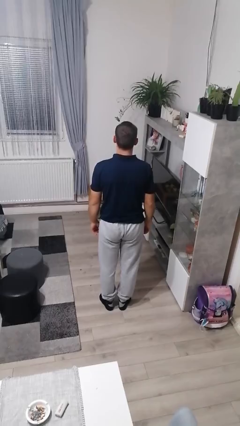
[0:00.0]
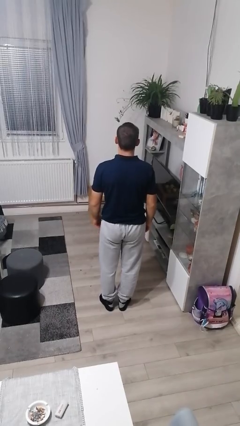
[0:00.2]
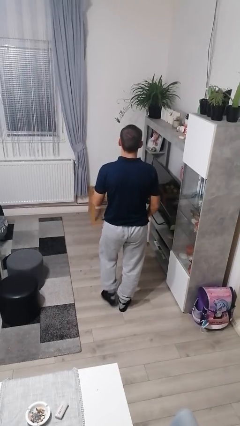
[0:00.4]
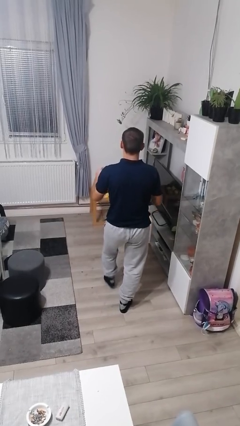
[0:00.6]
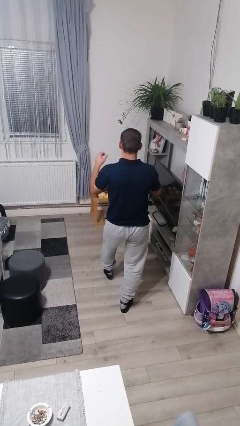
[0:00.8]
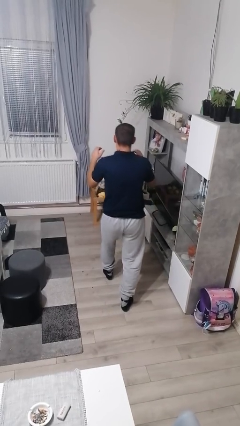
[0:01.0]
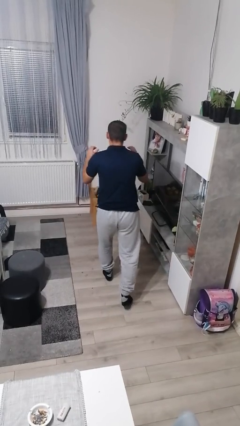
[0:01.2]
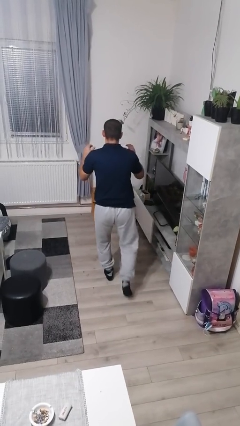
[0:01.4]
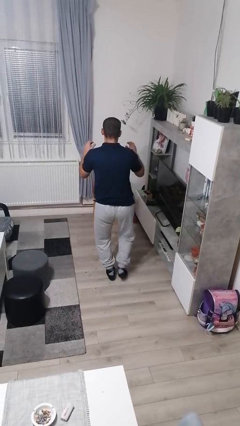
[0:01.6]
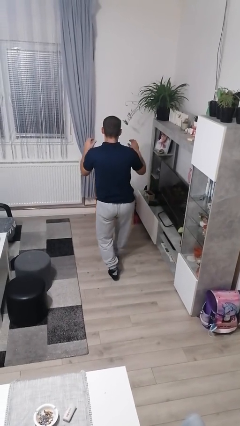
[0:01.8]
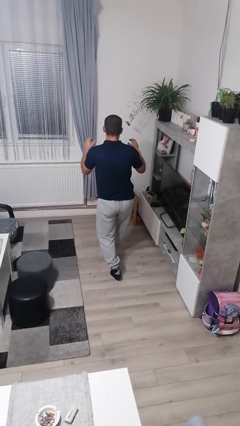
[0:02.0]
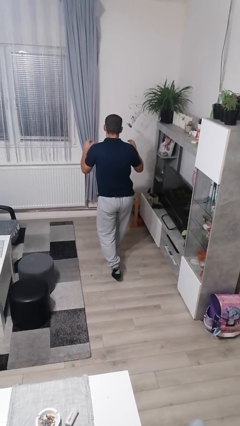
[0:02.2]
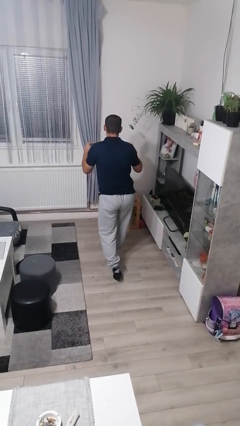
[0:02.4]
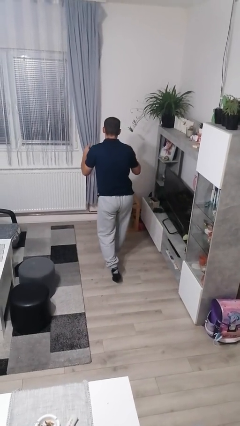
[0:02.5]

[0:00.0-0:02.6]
person walks tiptoe

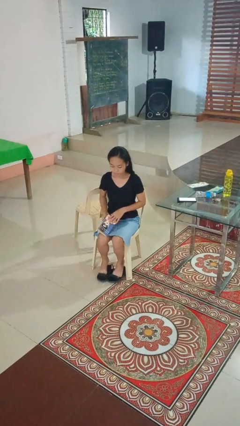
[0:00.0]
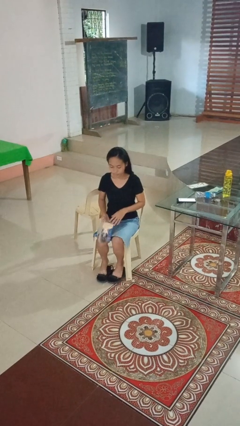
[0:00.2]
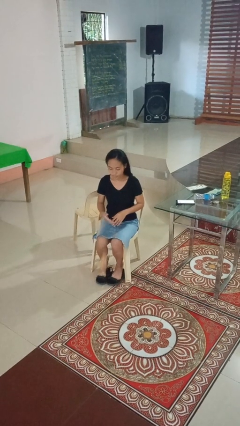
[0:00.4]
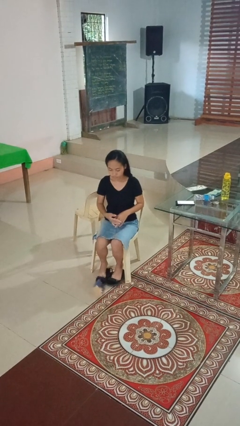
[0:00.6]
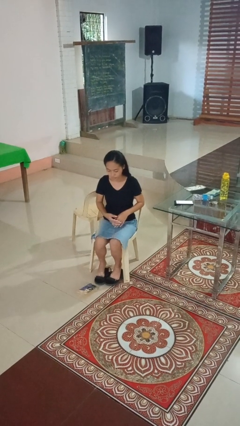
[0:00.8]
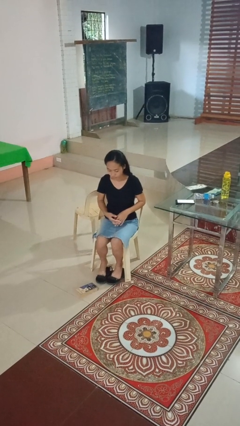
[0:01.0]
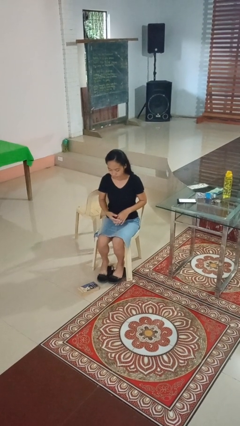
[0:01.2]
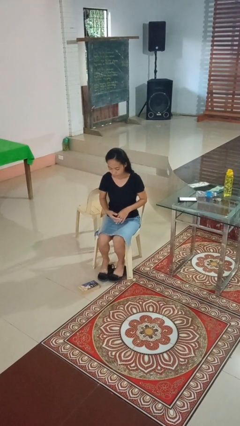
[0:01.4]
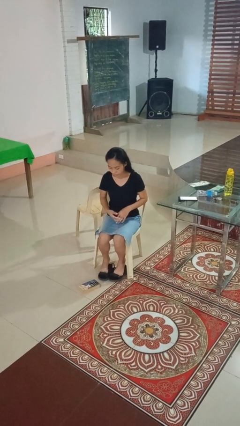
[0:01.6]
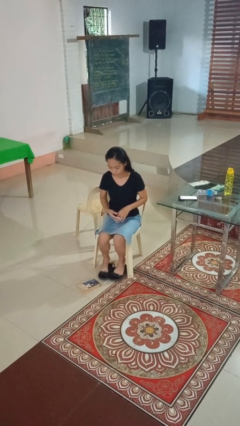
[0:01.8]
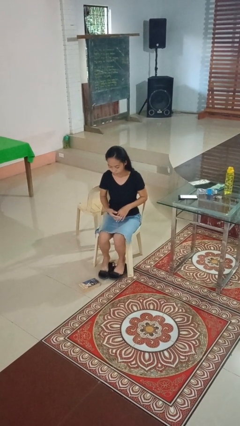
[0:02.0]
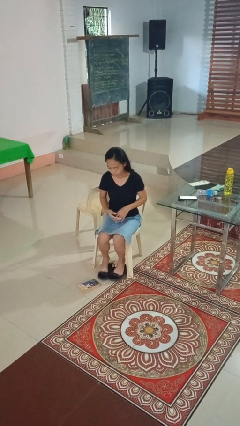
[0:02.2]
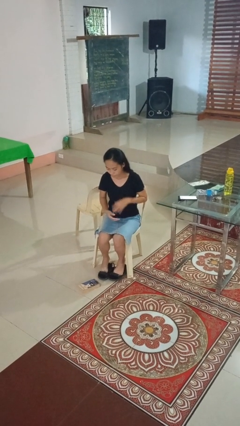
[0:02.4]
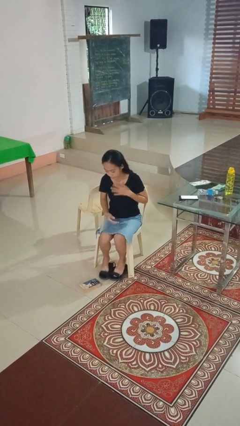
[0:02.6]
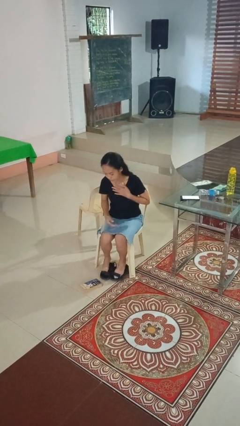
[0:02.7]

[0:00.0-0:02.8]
person drops object

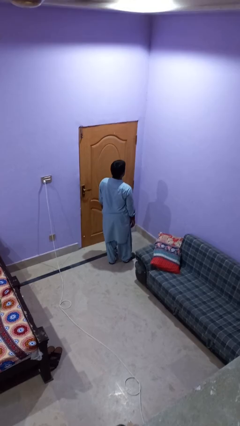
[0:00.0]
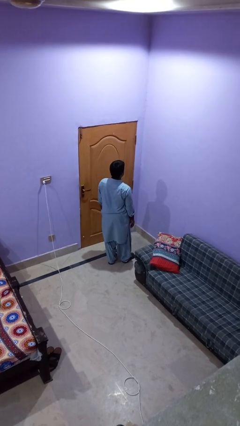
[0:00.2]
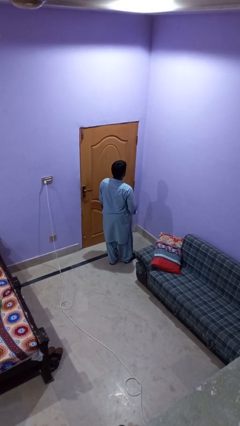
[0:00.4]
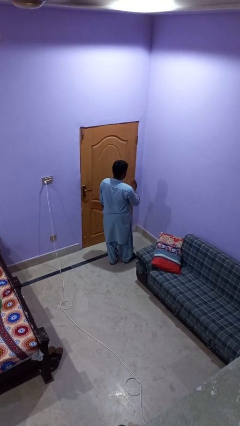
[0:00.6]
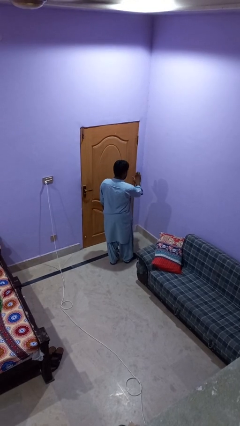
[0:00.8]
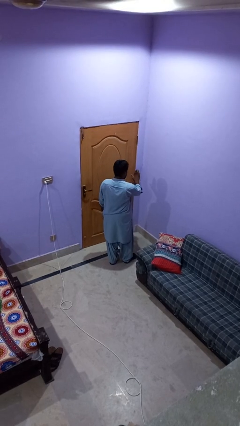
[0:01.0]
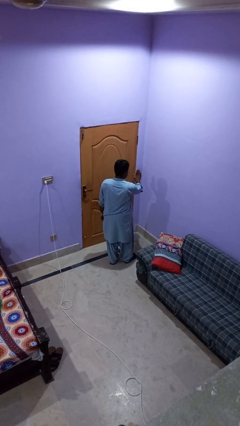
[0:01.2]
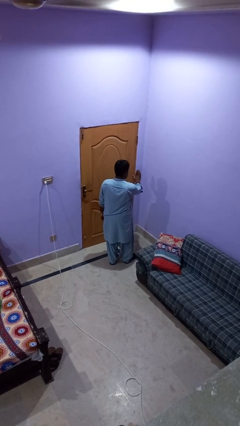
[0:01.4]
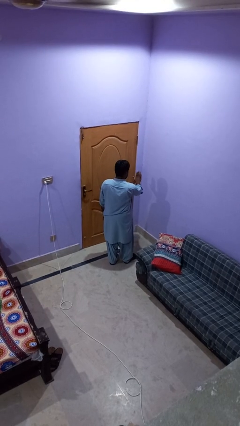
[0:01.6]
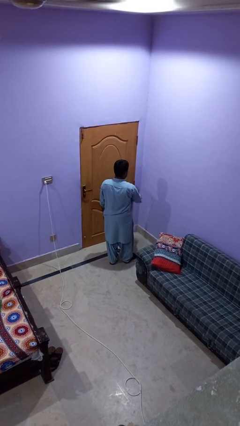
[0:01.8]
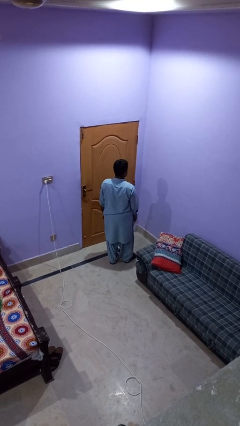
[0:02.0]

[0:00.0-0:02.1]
person gestures stop

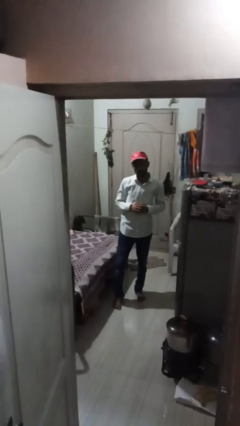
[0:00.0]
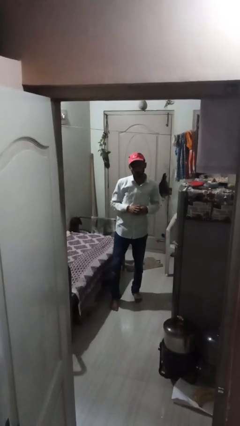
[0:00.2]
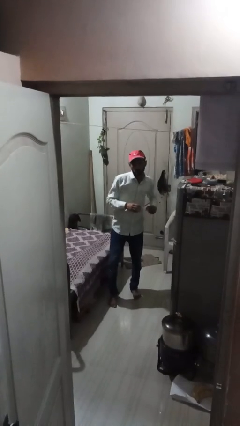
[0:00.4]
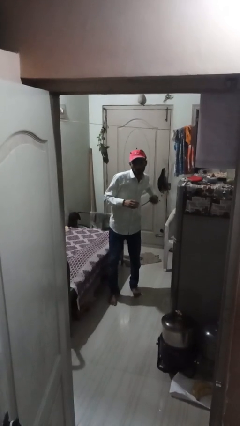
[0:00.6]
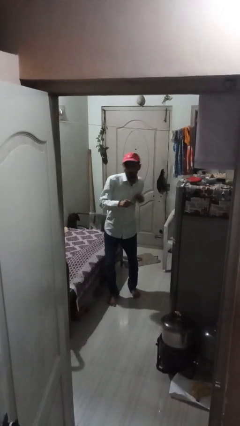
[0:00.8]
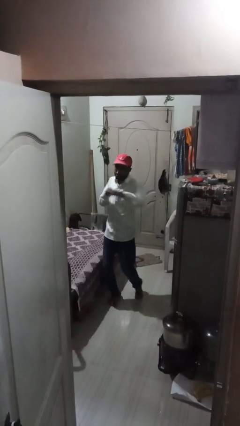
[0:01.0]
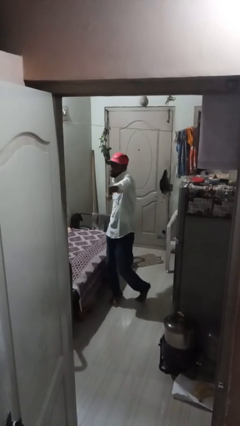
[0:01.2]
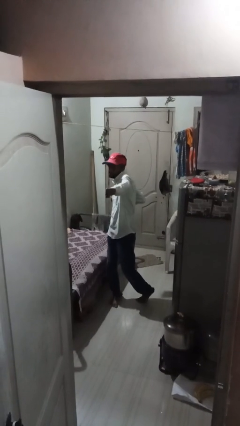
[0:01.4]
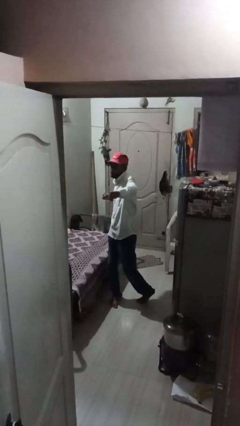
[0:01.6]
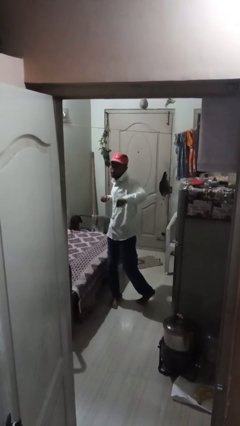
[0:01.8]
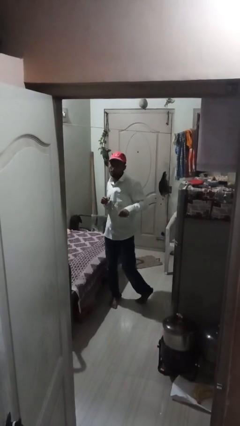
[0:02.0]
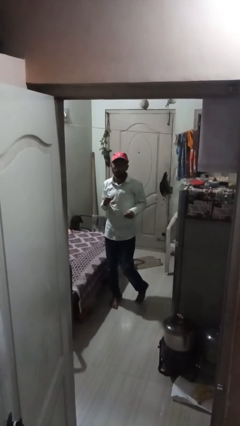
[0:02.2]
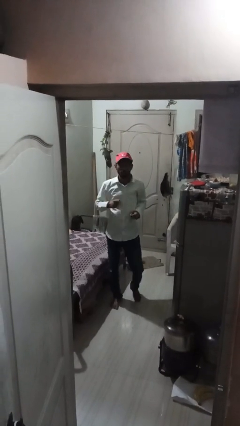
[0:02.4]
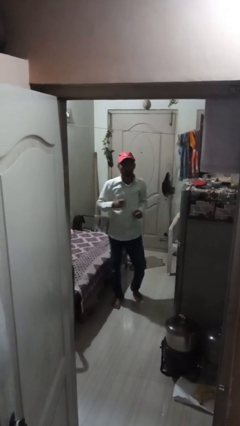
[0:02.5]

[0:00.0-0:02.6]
person punches

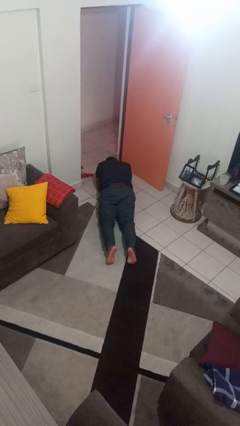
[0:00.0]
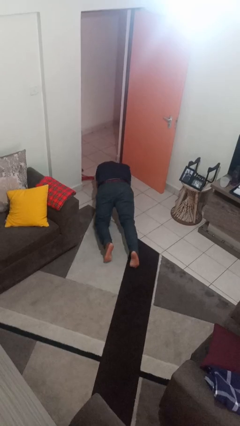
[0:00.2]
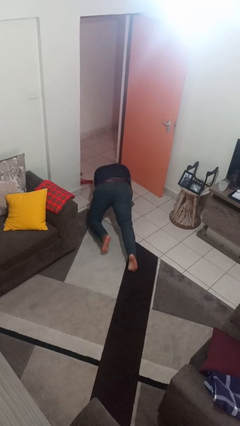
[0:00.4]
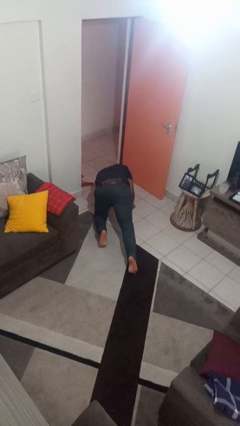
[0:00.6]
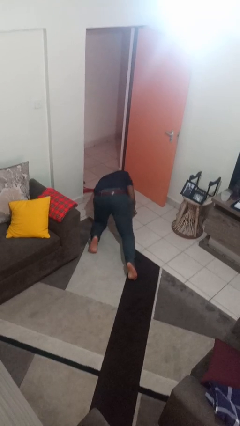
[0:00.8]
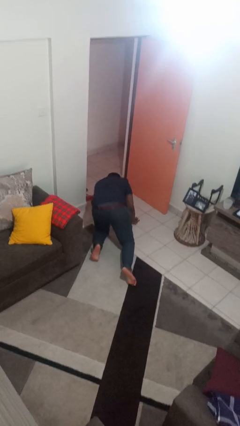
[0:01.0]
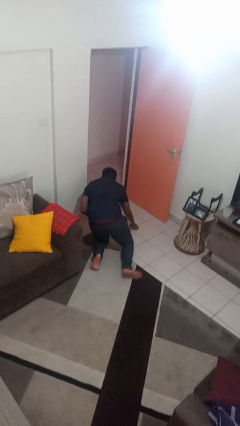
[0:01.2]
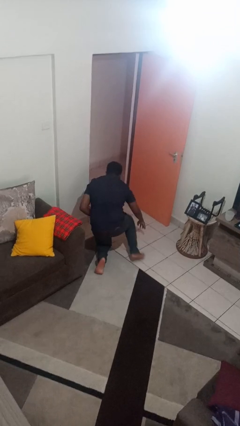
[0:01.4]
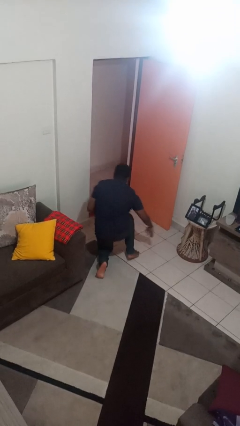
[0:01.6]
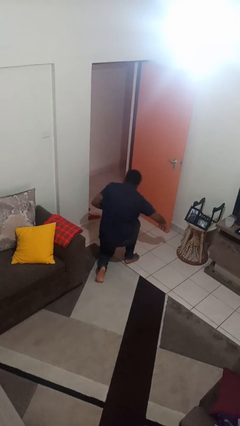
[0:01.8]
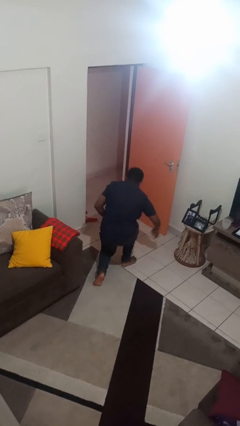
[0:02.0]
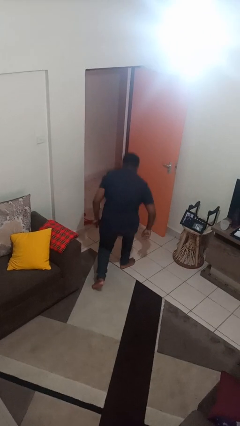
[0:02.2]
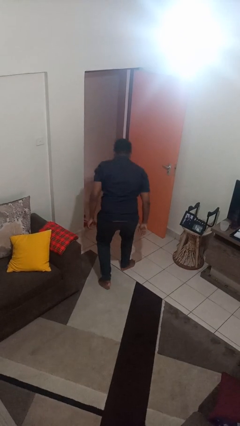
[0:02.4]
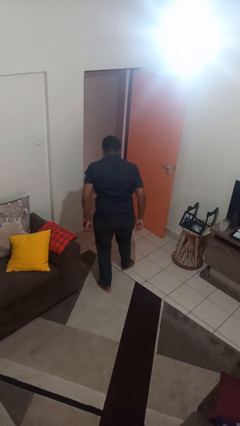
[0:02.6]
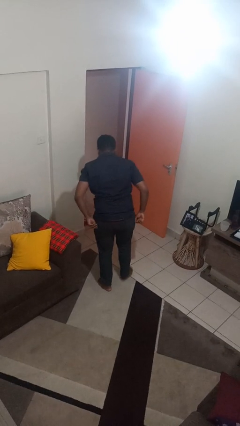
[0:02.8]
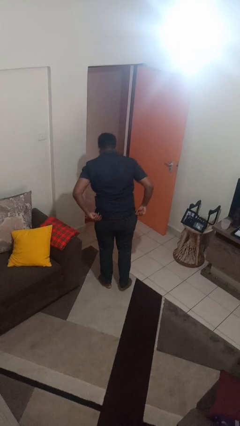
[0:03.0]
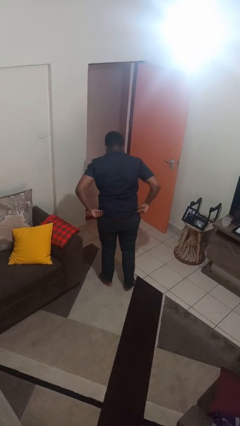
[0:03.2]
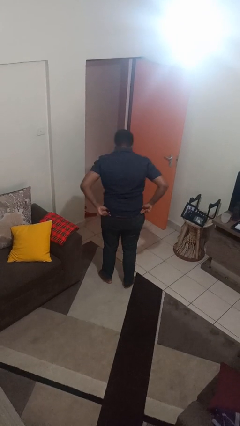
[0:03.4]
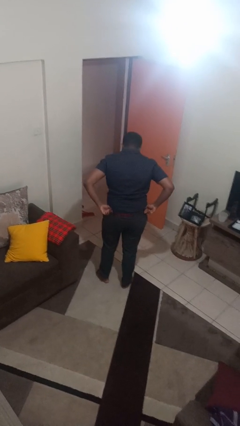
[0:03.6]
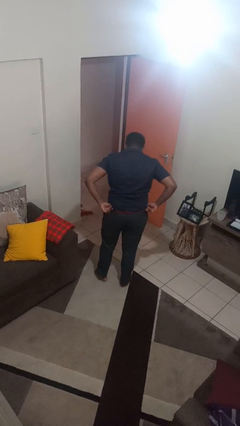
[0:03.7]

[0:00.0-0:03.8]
person stands up from floor

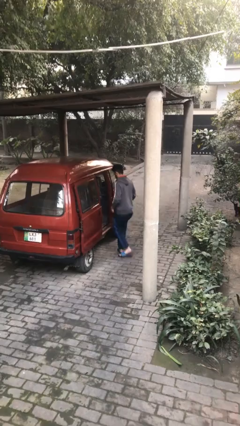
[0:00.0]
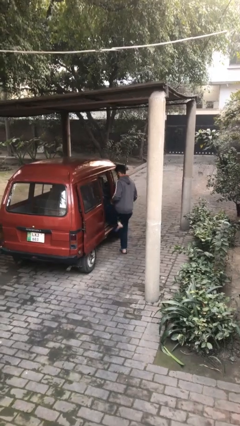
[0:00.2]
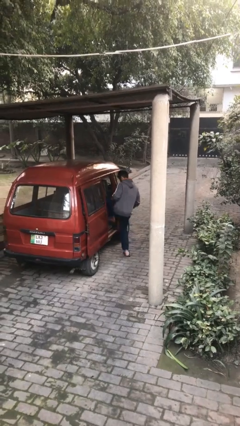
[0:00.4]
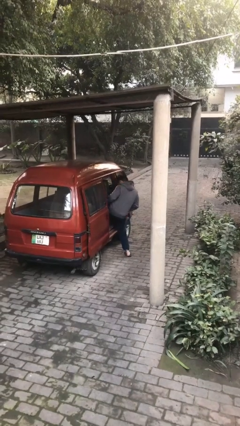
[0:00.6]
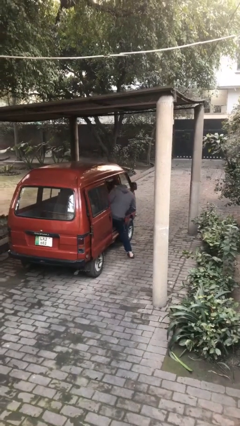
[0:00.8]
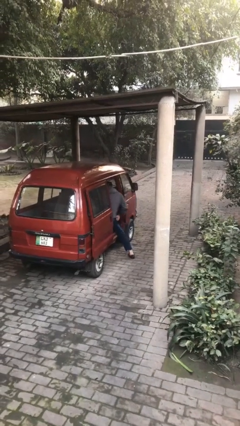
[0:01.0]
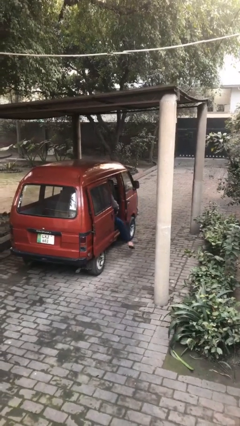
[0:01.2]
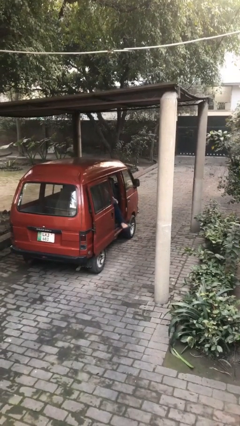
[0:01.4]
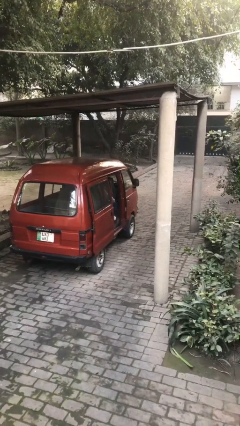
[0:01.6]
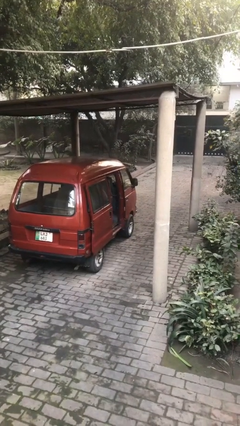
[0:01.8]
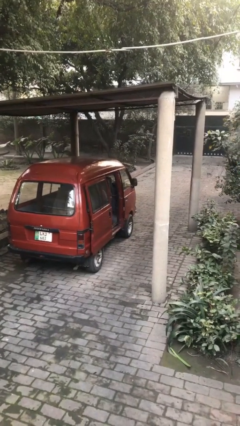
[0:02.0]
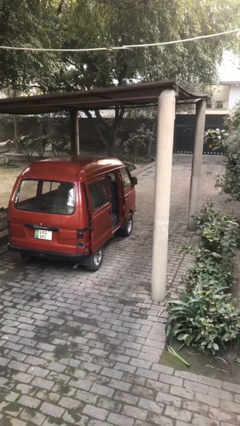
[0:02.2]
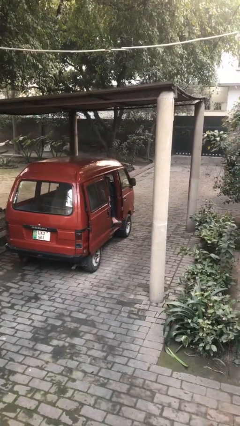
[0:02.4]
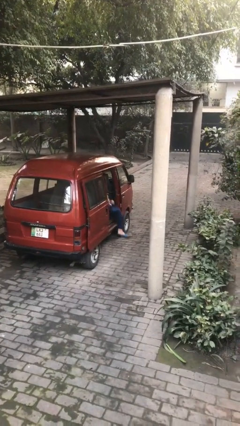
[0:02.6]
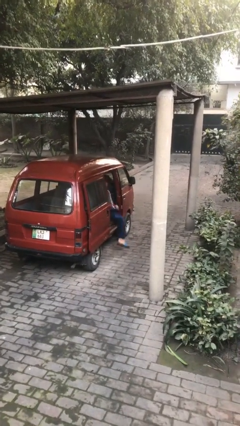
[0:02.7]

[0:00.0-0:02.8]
person enters car

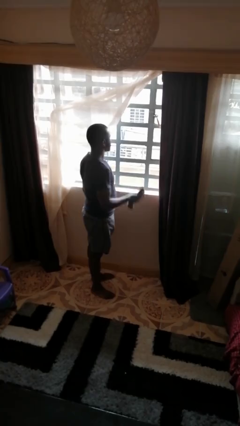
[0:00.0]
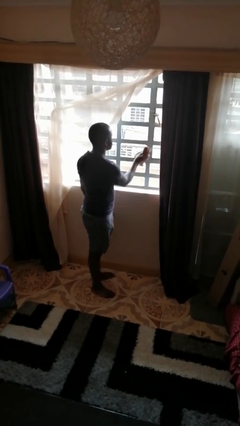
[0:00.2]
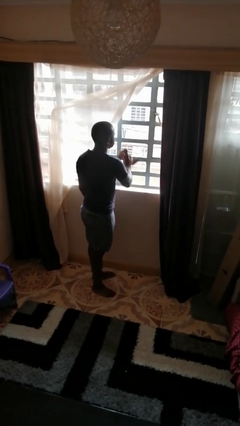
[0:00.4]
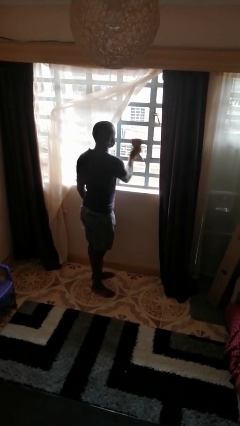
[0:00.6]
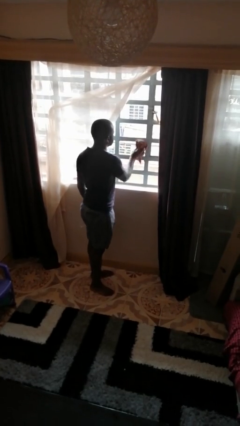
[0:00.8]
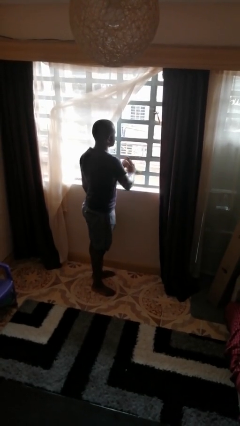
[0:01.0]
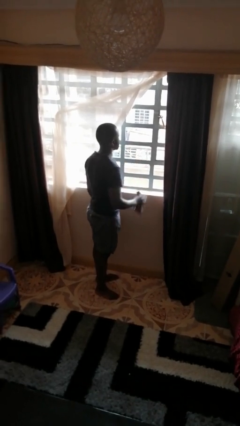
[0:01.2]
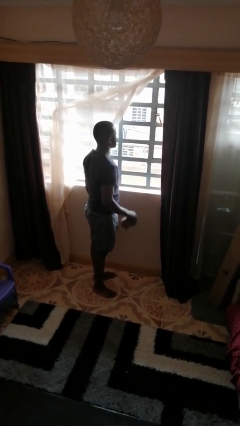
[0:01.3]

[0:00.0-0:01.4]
person washes window
